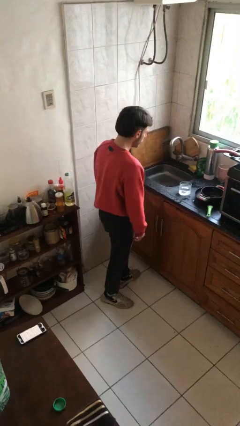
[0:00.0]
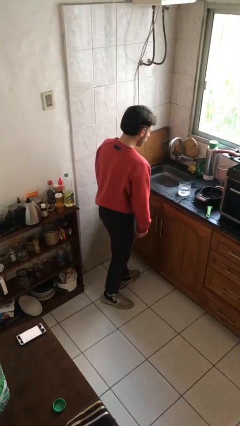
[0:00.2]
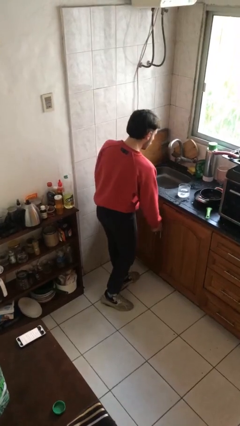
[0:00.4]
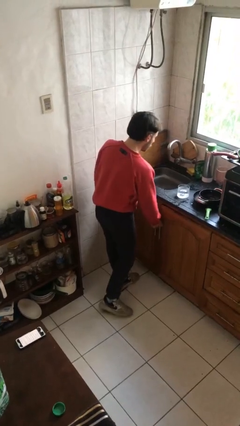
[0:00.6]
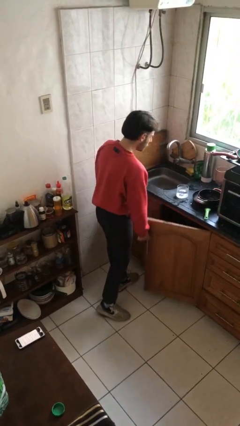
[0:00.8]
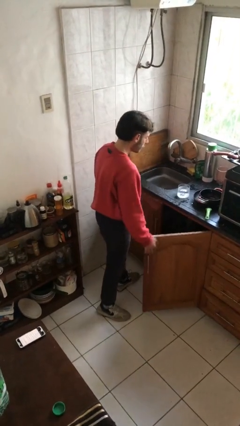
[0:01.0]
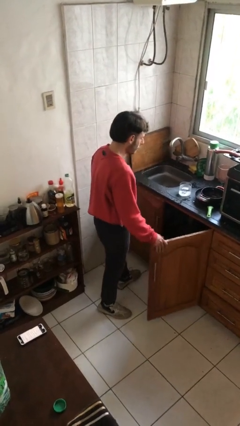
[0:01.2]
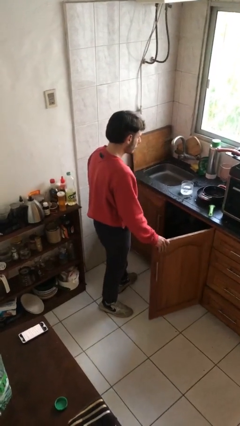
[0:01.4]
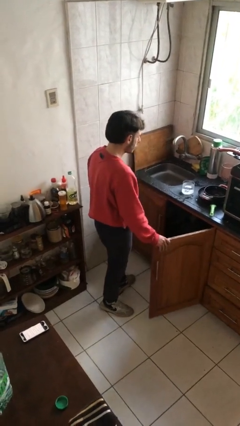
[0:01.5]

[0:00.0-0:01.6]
person opens cabinet

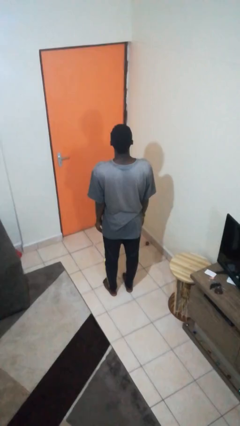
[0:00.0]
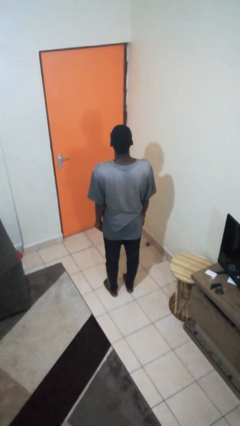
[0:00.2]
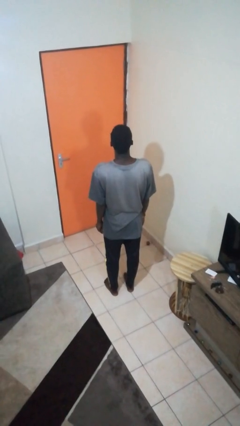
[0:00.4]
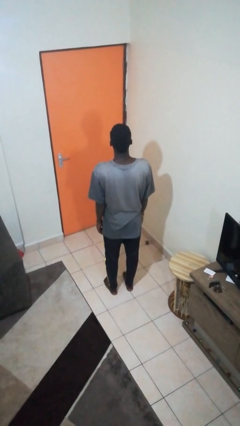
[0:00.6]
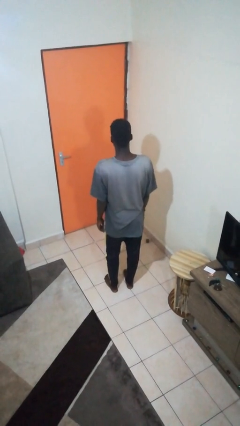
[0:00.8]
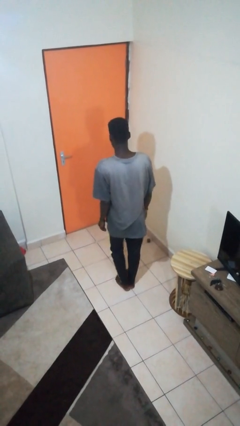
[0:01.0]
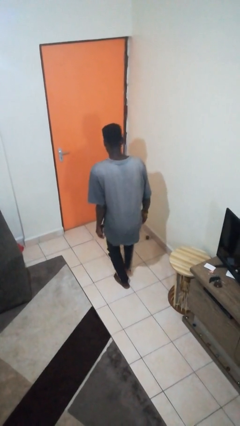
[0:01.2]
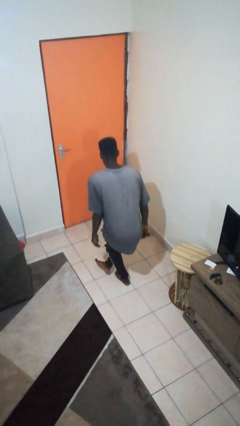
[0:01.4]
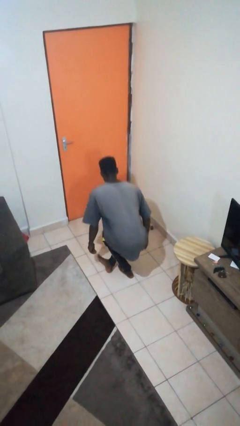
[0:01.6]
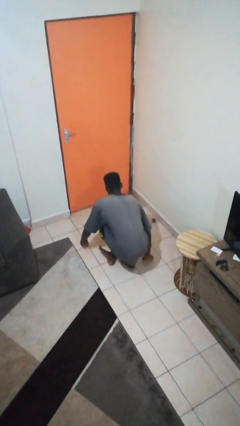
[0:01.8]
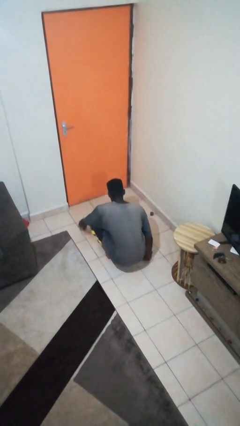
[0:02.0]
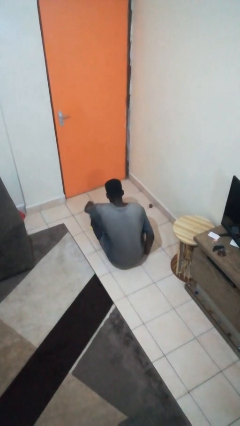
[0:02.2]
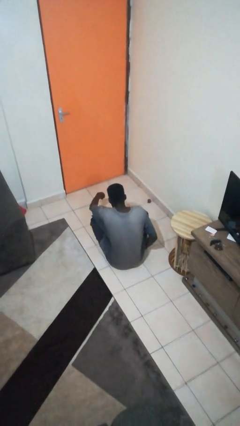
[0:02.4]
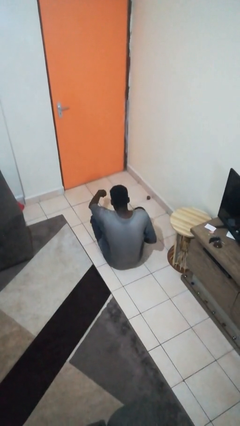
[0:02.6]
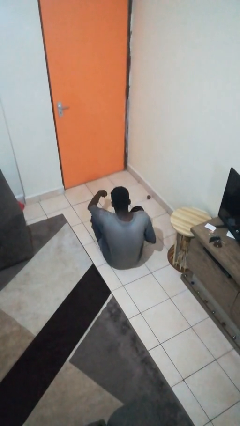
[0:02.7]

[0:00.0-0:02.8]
person sits crisscross

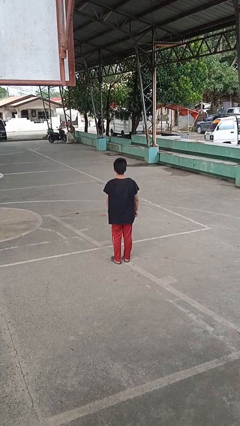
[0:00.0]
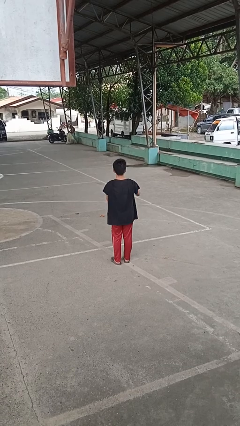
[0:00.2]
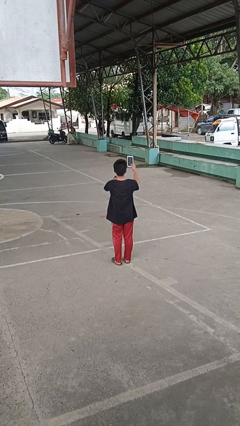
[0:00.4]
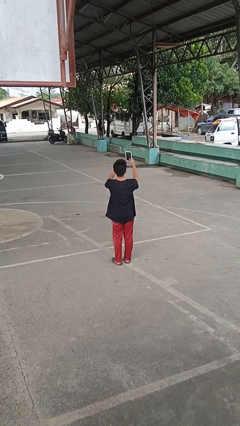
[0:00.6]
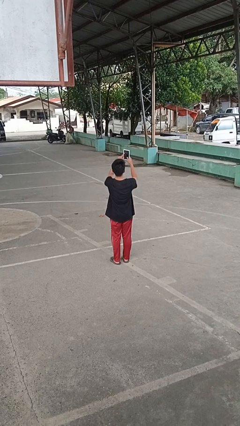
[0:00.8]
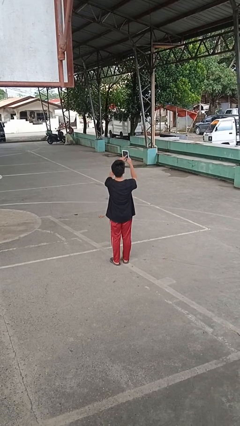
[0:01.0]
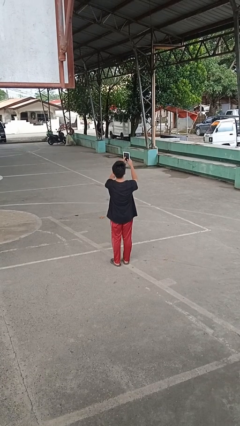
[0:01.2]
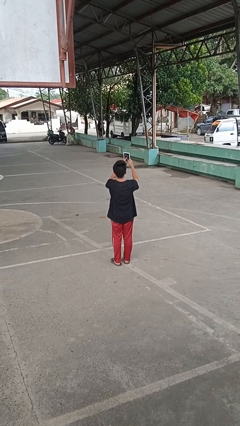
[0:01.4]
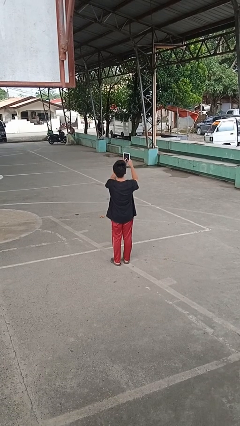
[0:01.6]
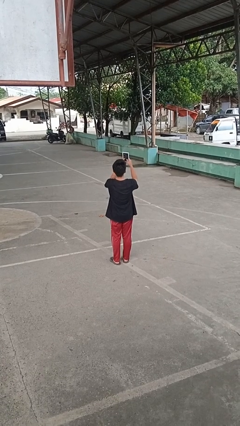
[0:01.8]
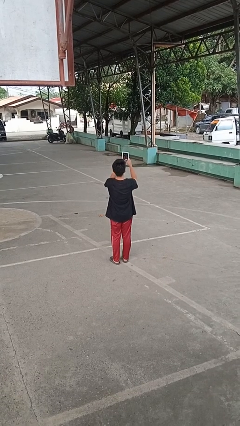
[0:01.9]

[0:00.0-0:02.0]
person interacts with tablet

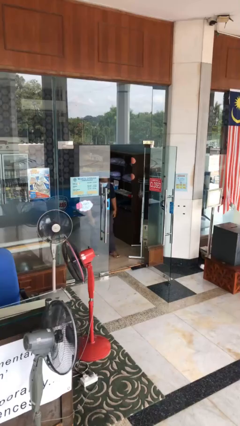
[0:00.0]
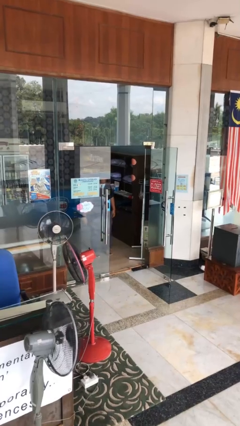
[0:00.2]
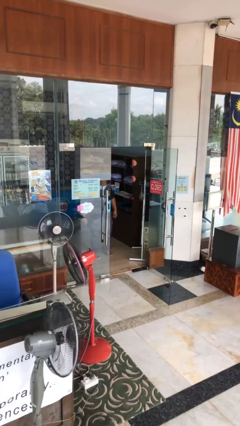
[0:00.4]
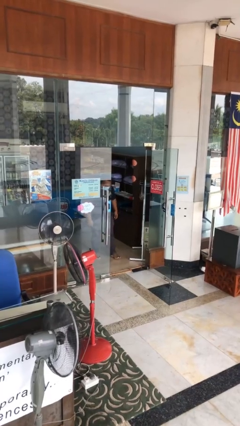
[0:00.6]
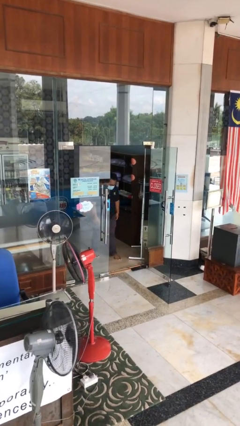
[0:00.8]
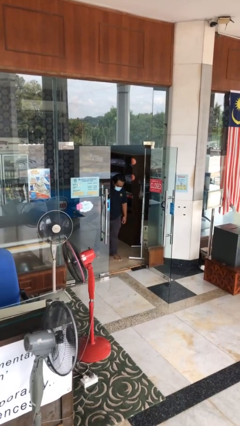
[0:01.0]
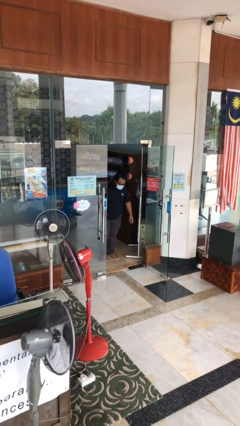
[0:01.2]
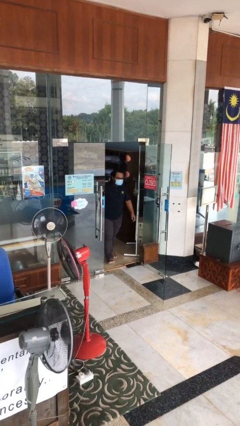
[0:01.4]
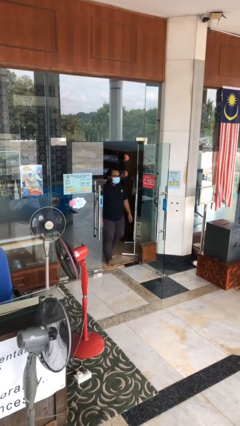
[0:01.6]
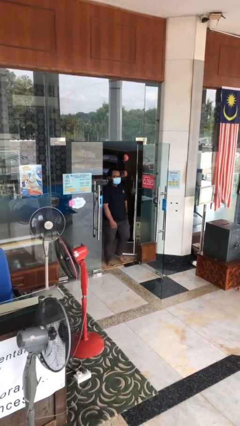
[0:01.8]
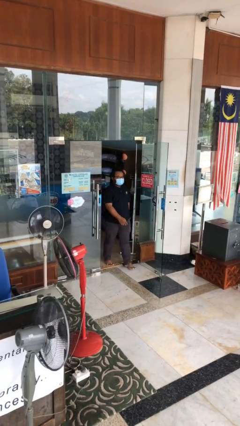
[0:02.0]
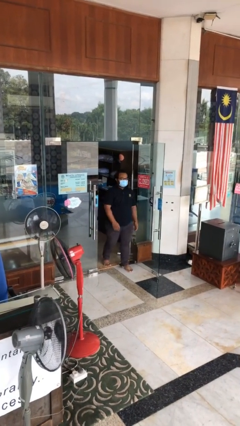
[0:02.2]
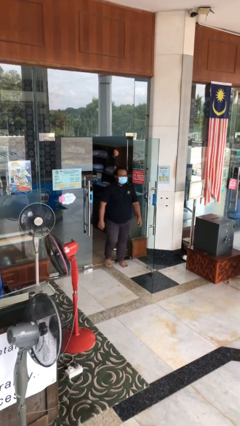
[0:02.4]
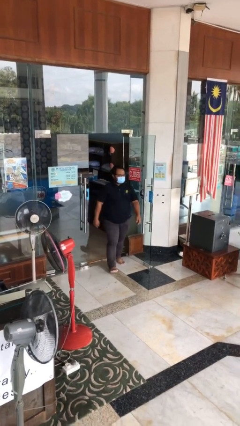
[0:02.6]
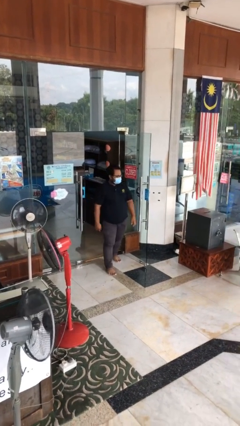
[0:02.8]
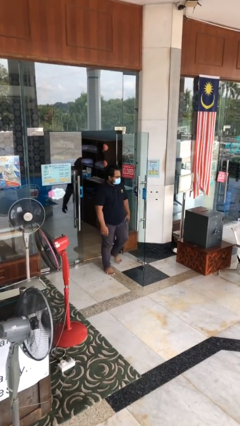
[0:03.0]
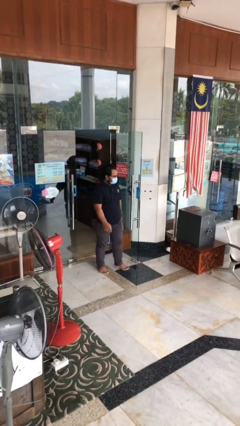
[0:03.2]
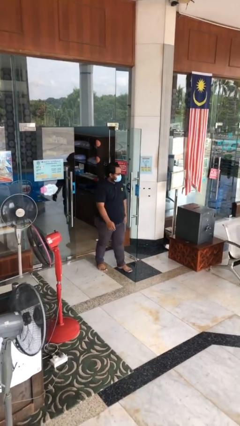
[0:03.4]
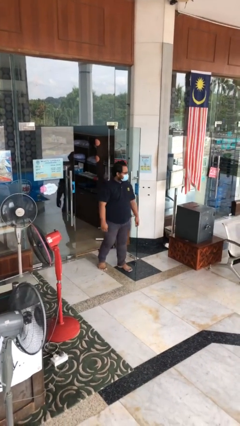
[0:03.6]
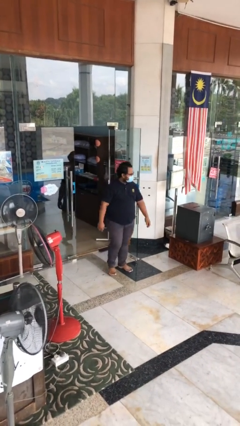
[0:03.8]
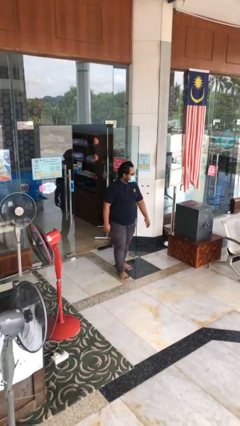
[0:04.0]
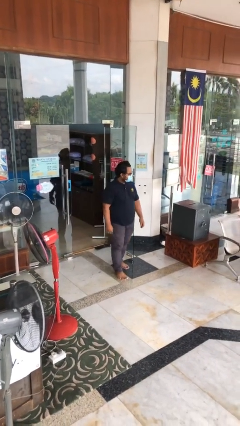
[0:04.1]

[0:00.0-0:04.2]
person enters scene through structure

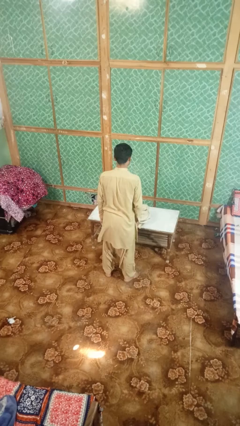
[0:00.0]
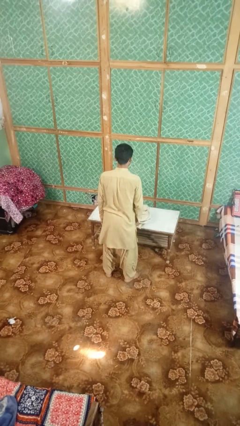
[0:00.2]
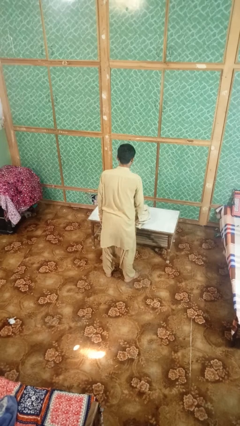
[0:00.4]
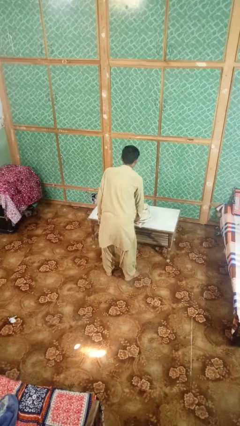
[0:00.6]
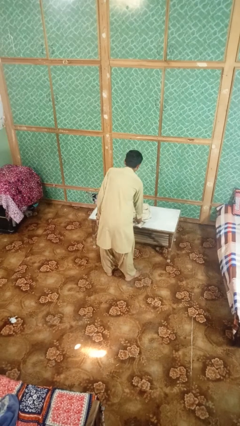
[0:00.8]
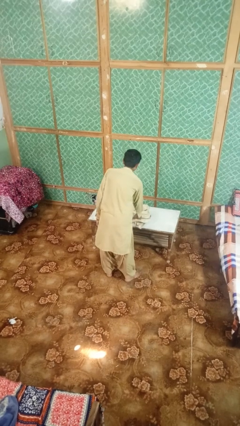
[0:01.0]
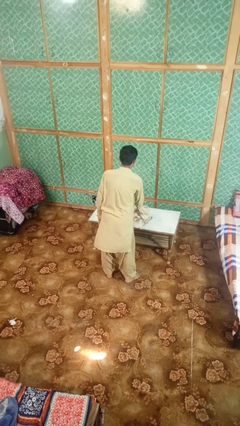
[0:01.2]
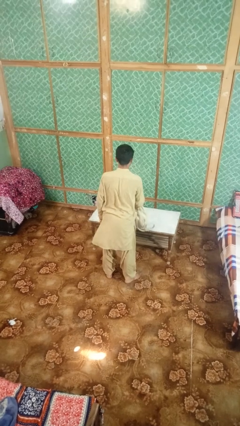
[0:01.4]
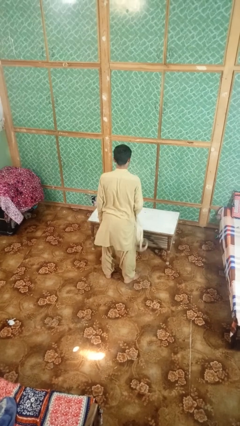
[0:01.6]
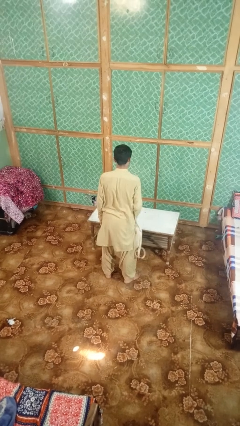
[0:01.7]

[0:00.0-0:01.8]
person picks up object from table

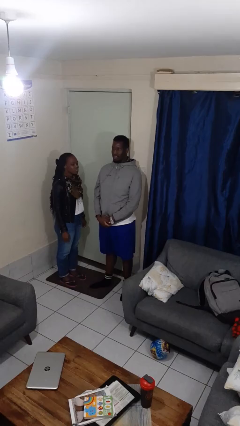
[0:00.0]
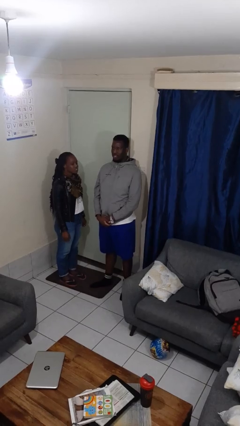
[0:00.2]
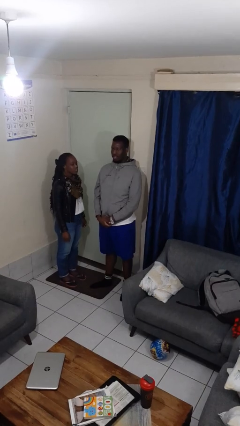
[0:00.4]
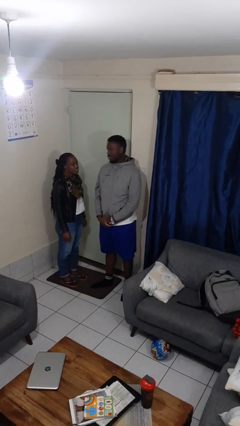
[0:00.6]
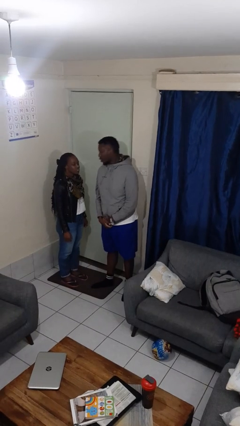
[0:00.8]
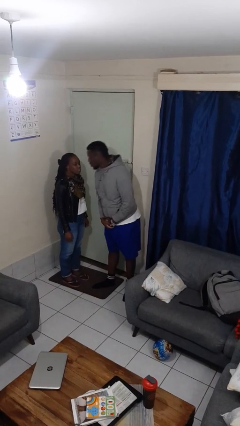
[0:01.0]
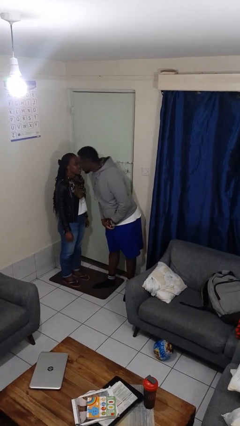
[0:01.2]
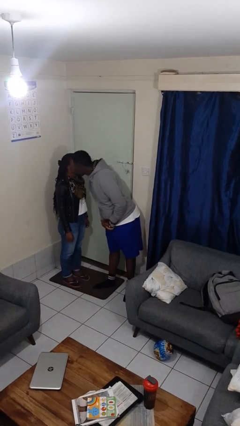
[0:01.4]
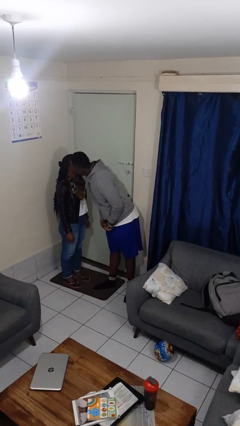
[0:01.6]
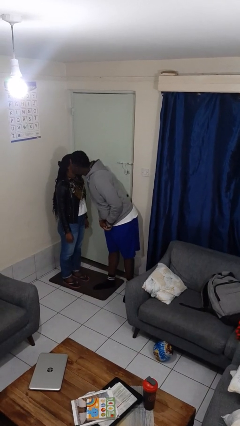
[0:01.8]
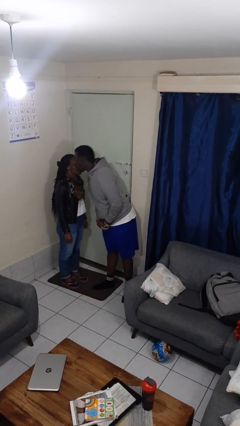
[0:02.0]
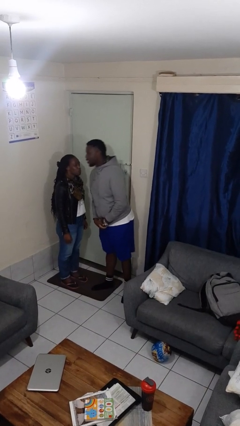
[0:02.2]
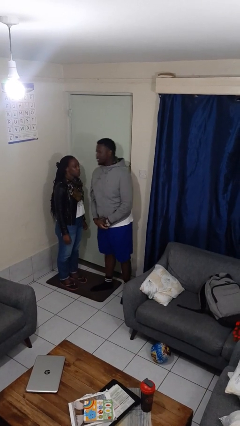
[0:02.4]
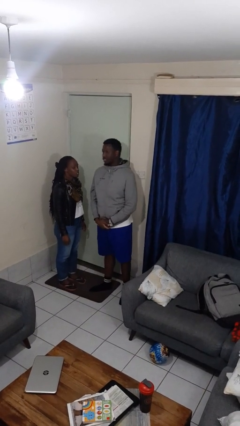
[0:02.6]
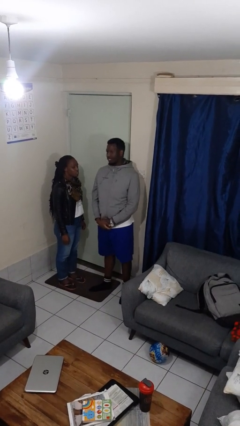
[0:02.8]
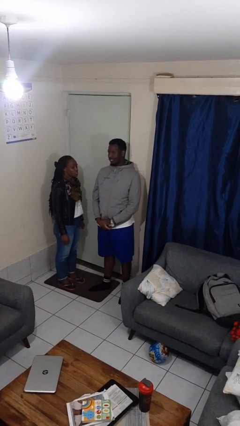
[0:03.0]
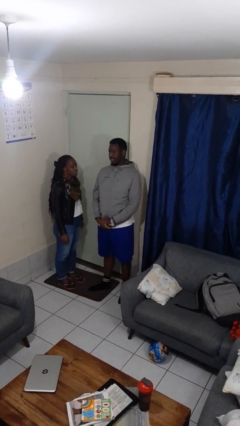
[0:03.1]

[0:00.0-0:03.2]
person kisses cheek of person

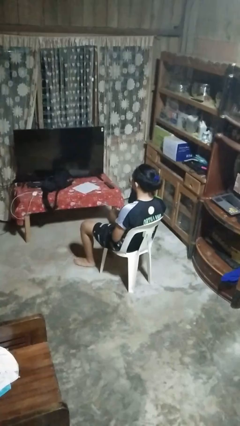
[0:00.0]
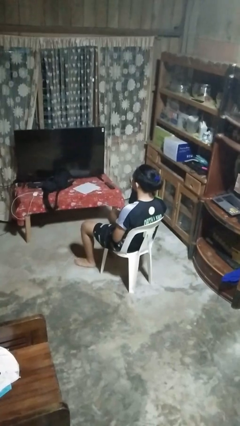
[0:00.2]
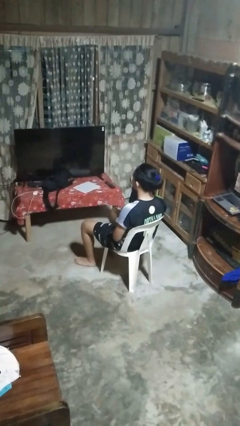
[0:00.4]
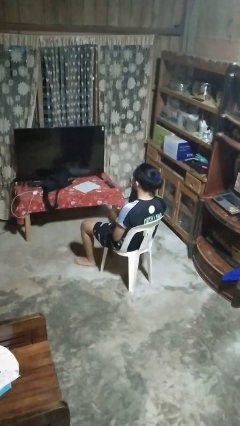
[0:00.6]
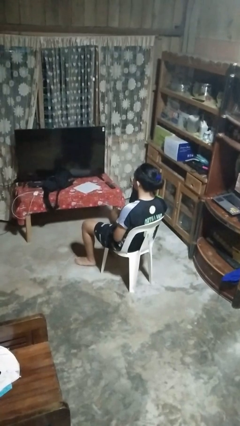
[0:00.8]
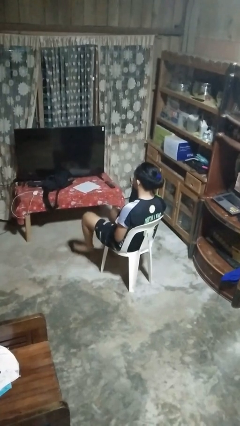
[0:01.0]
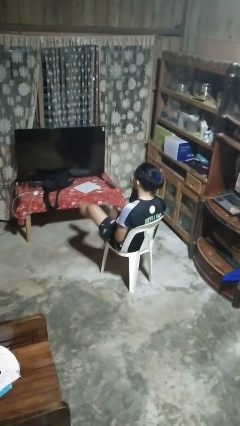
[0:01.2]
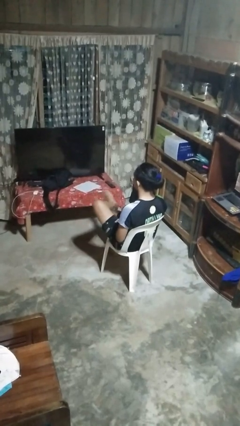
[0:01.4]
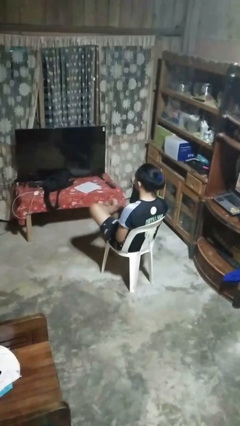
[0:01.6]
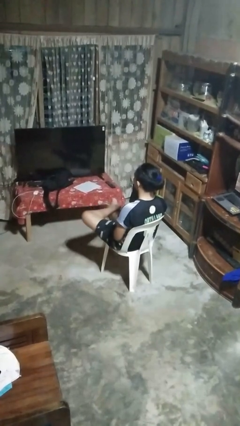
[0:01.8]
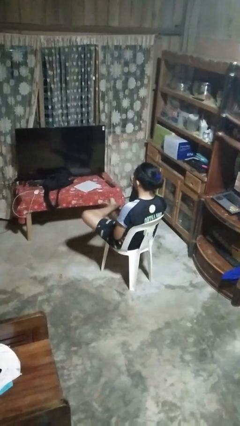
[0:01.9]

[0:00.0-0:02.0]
person crosses legs
